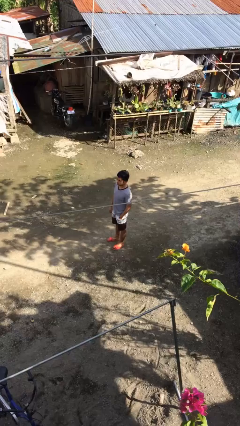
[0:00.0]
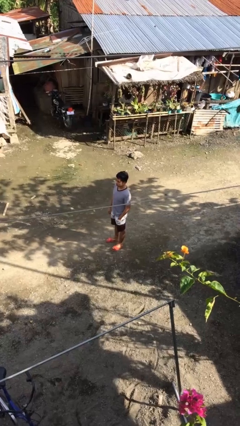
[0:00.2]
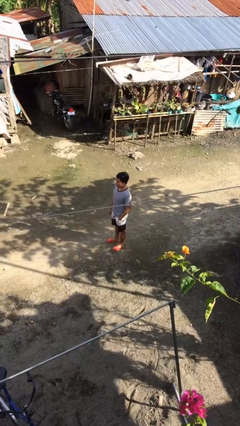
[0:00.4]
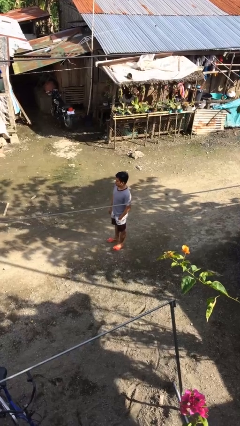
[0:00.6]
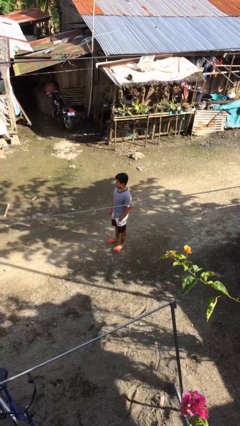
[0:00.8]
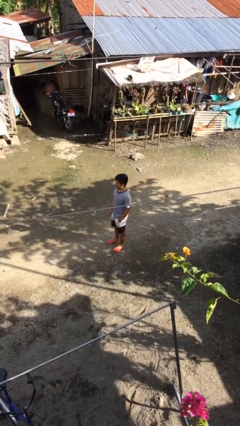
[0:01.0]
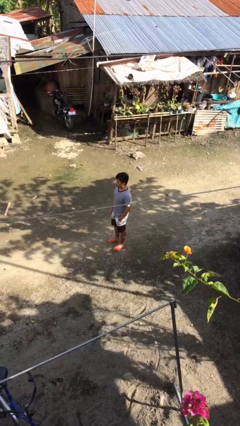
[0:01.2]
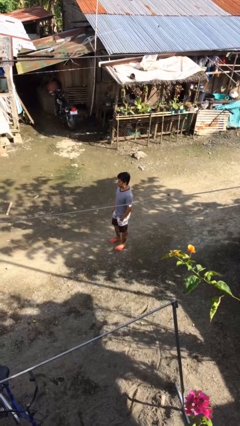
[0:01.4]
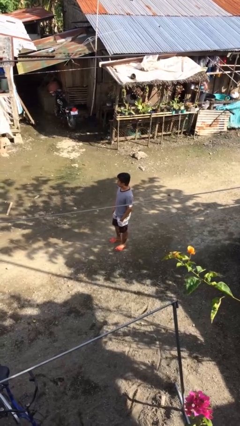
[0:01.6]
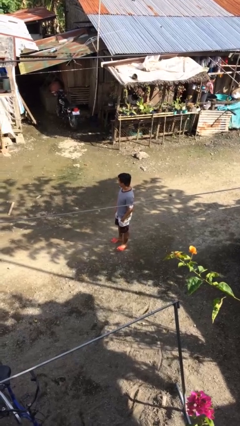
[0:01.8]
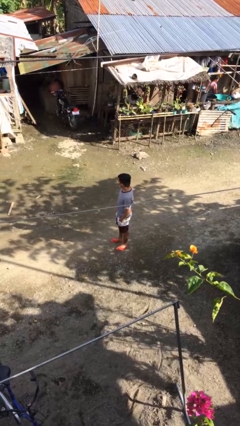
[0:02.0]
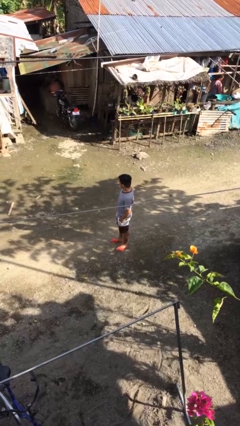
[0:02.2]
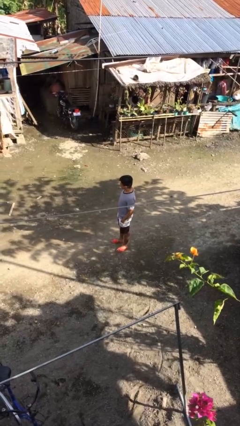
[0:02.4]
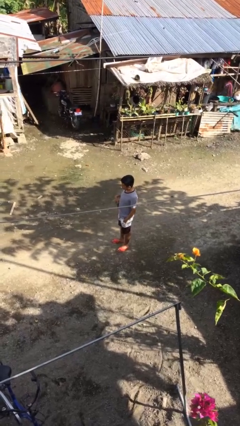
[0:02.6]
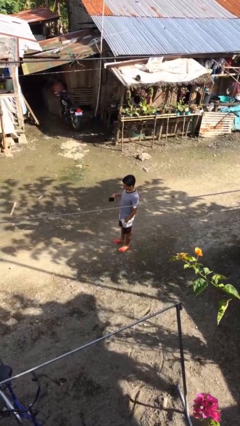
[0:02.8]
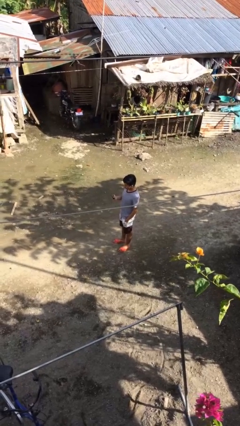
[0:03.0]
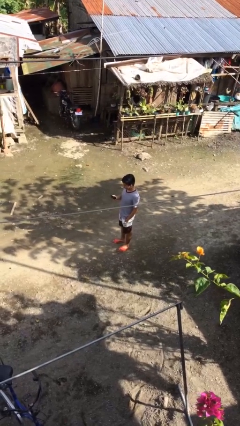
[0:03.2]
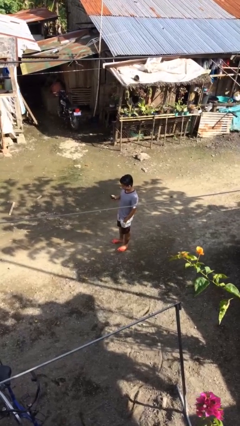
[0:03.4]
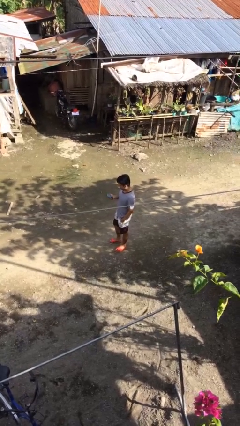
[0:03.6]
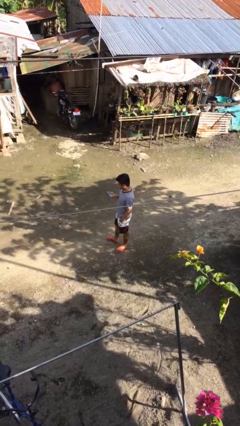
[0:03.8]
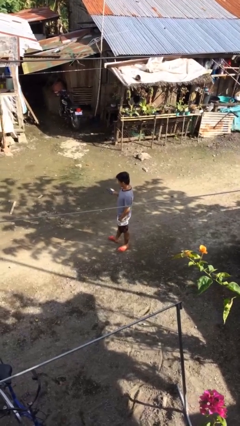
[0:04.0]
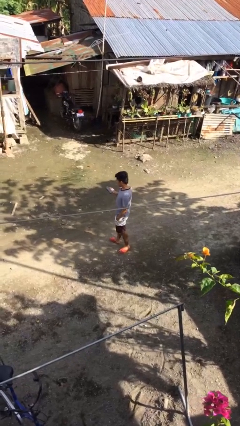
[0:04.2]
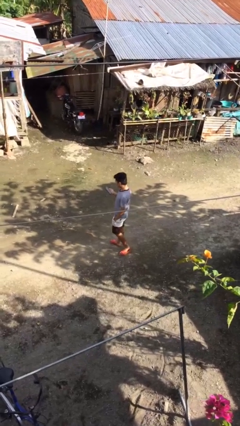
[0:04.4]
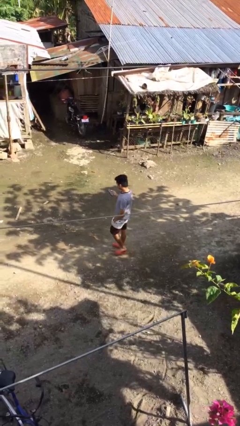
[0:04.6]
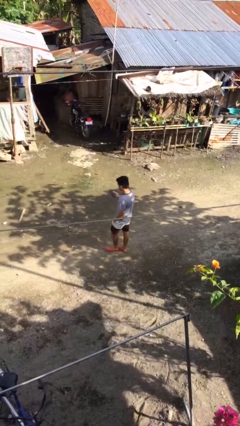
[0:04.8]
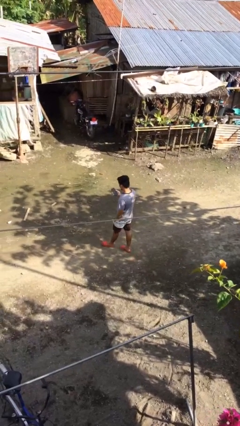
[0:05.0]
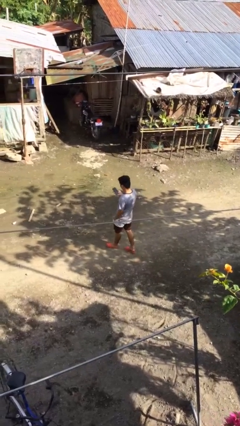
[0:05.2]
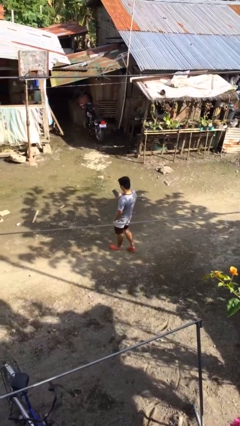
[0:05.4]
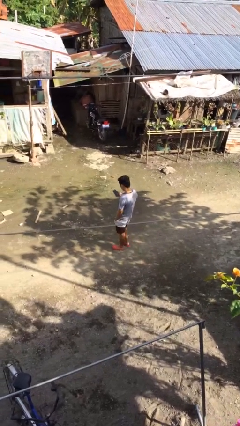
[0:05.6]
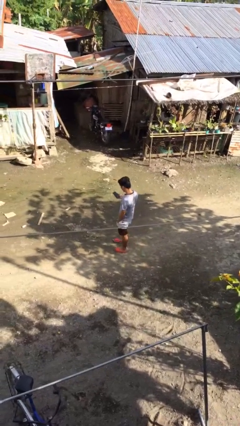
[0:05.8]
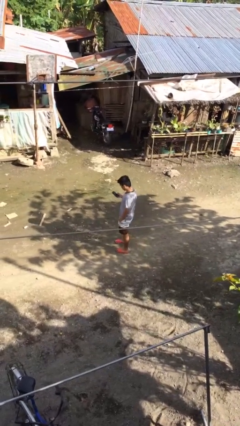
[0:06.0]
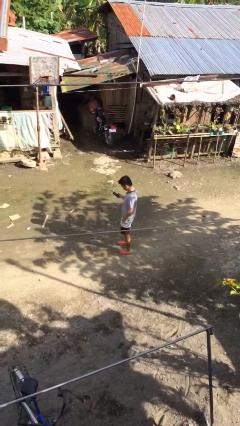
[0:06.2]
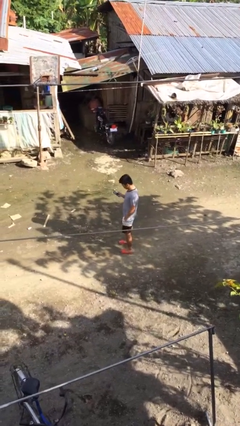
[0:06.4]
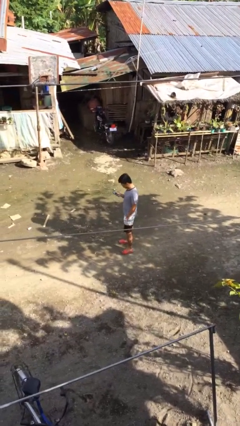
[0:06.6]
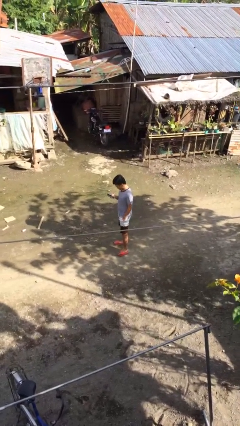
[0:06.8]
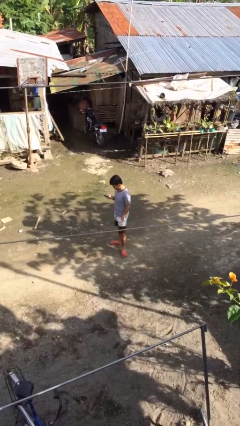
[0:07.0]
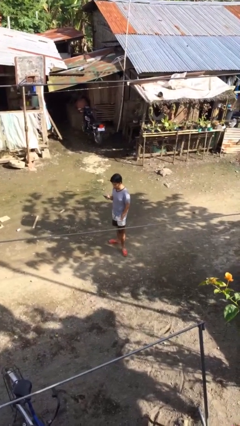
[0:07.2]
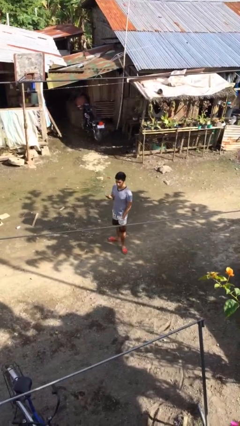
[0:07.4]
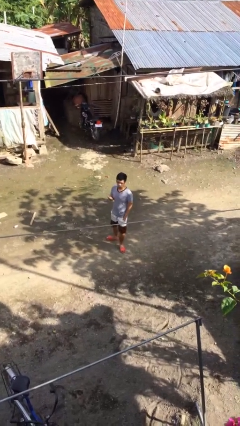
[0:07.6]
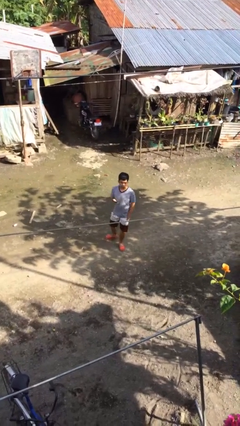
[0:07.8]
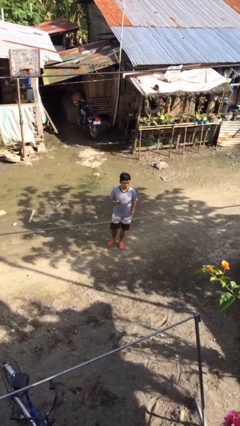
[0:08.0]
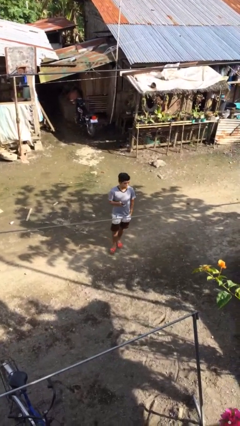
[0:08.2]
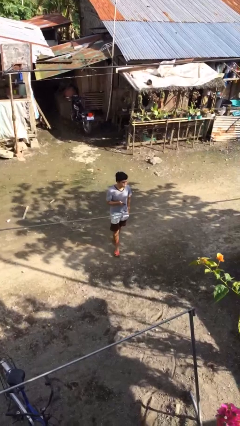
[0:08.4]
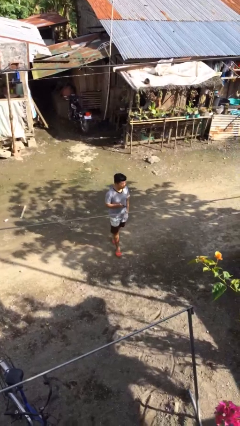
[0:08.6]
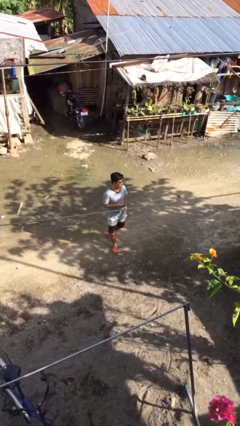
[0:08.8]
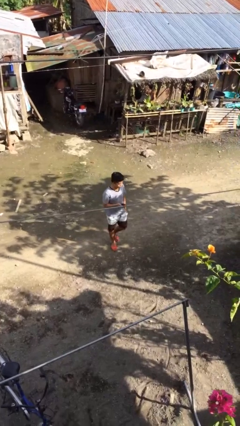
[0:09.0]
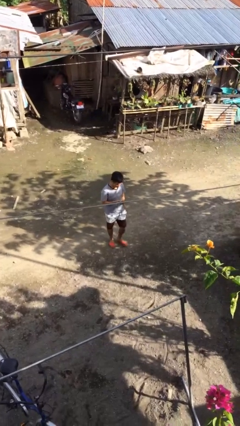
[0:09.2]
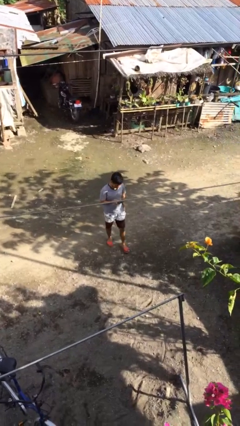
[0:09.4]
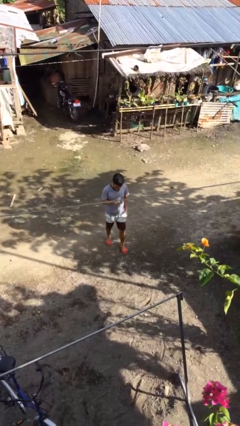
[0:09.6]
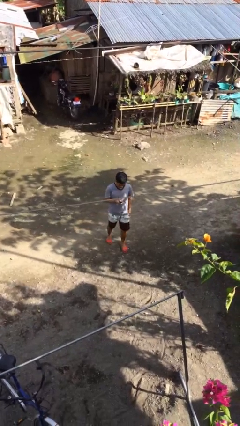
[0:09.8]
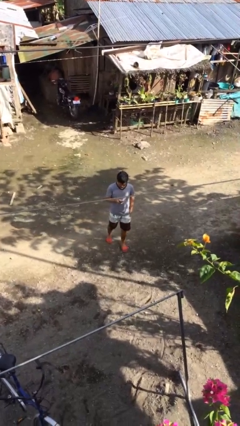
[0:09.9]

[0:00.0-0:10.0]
person walks

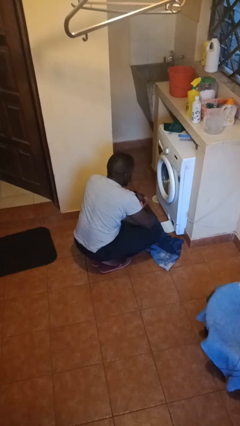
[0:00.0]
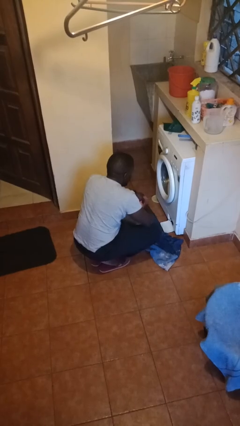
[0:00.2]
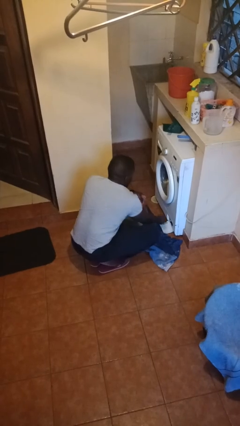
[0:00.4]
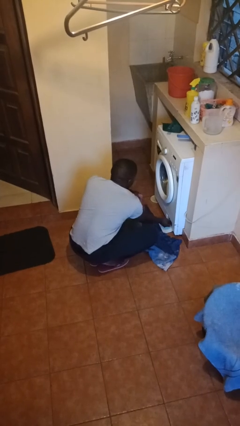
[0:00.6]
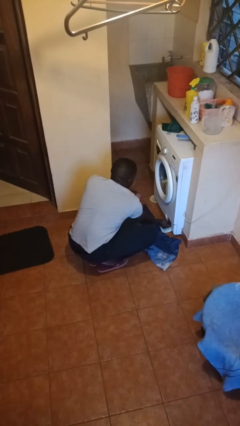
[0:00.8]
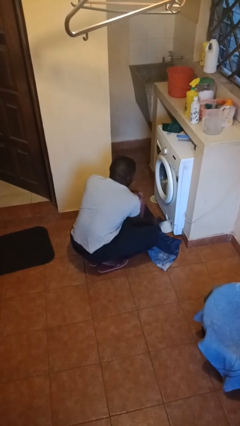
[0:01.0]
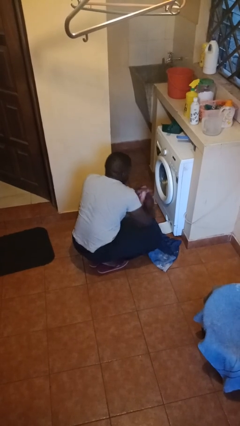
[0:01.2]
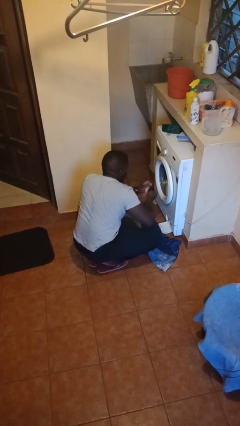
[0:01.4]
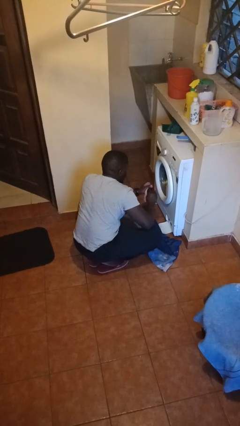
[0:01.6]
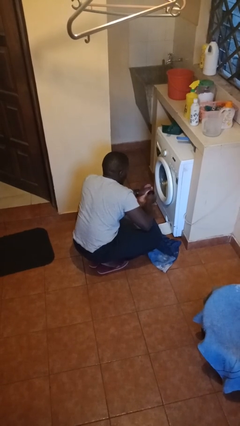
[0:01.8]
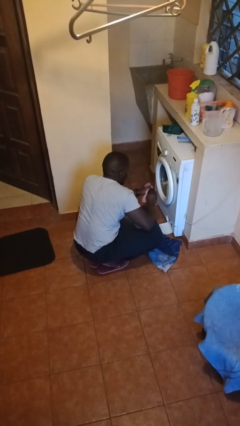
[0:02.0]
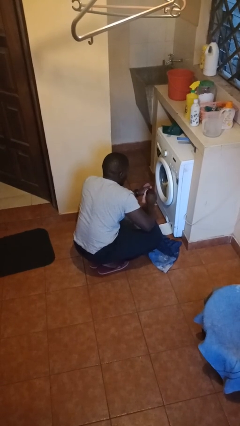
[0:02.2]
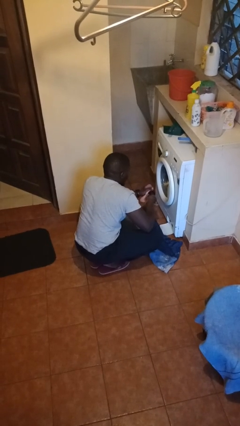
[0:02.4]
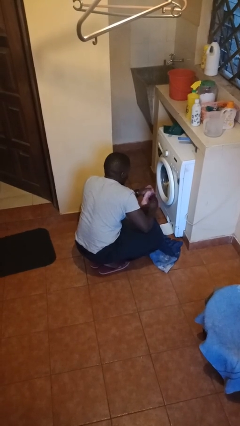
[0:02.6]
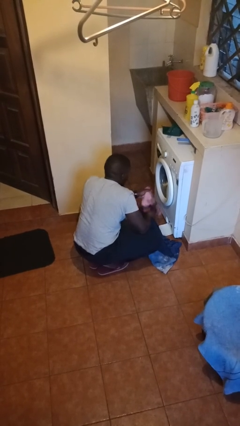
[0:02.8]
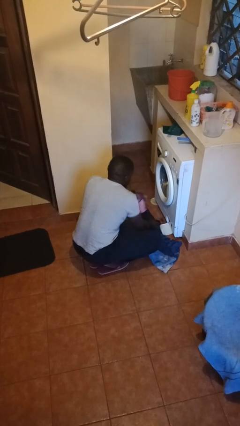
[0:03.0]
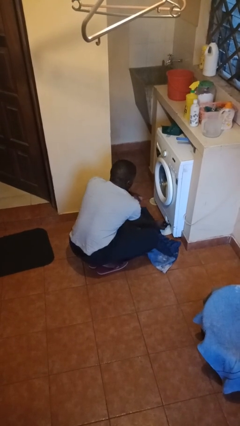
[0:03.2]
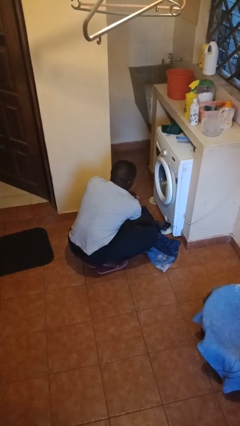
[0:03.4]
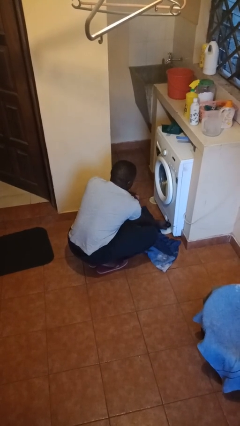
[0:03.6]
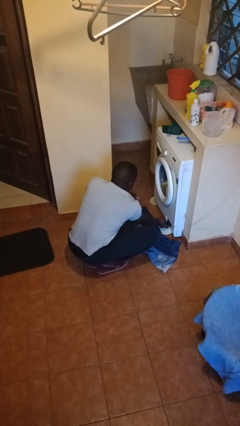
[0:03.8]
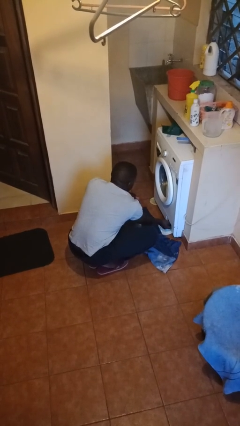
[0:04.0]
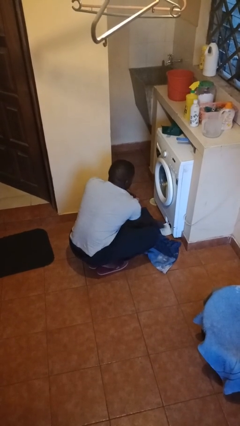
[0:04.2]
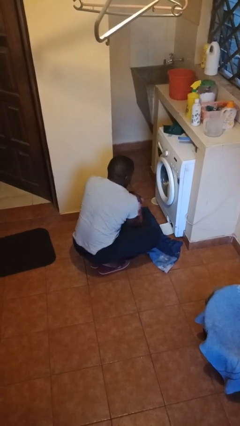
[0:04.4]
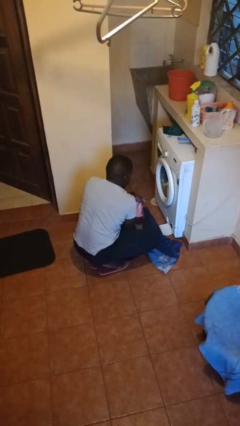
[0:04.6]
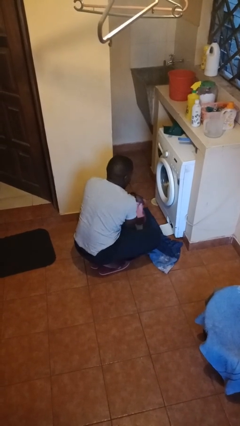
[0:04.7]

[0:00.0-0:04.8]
person cleans dryer lint trap

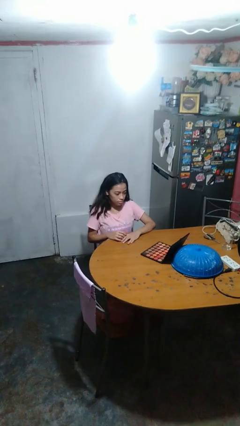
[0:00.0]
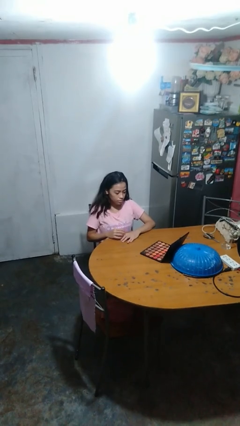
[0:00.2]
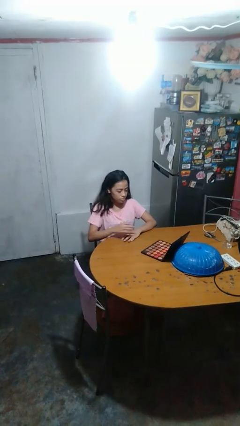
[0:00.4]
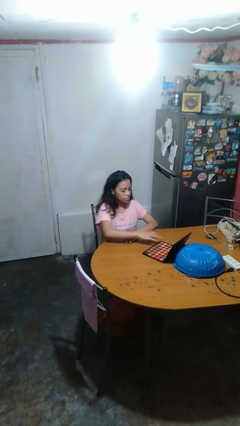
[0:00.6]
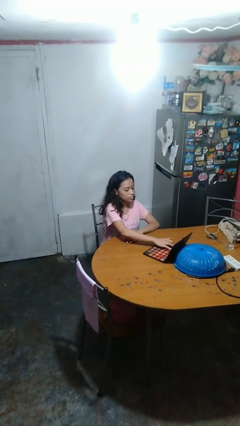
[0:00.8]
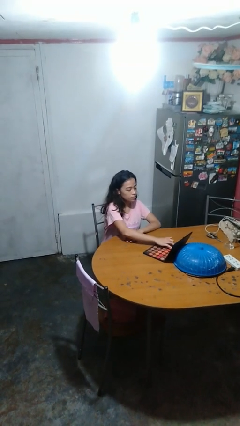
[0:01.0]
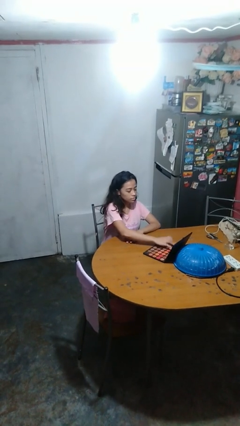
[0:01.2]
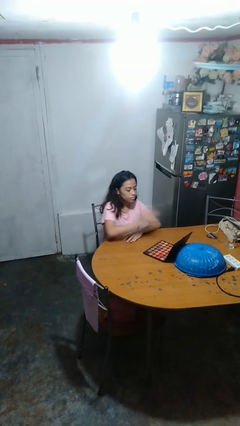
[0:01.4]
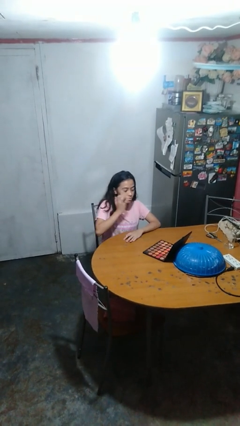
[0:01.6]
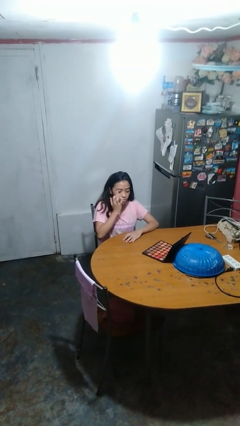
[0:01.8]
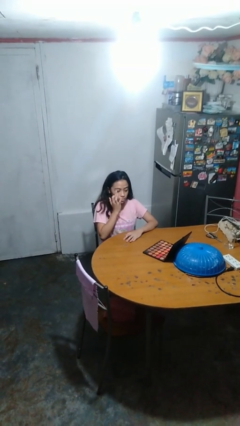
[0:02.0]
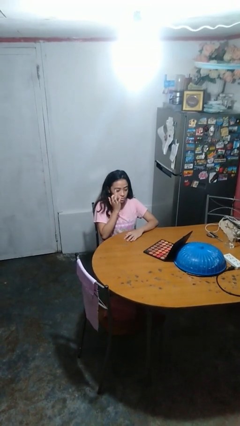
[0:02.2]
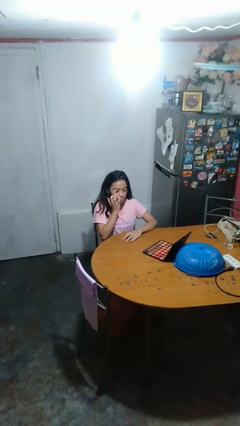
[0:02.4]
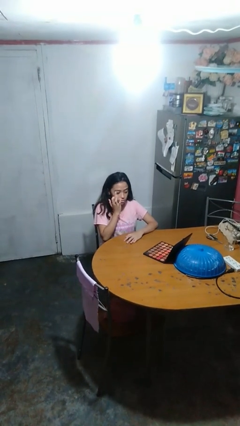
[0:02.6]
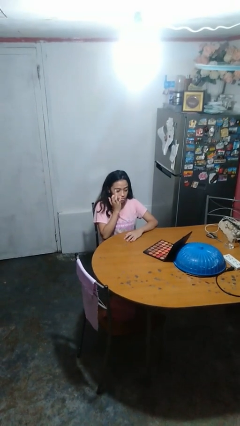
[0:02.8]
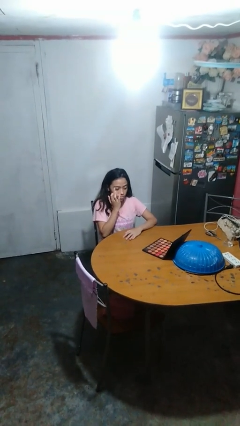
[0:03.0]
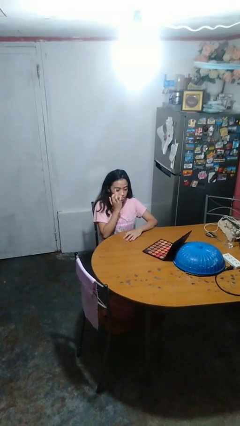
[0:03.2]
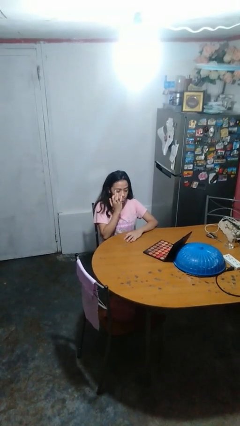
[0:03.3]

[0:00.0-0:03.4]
person applies eye makeup
